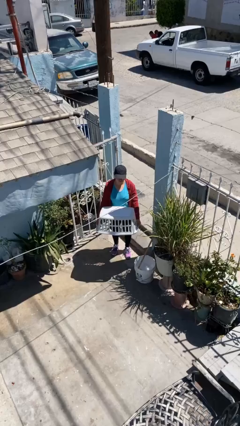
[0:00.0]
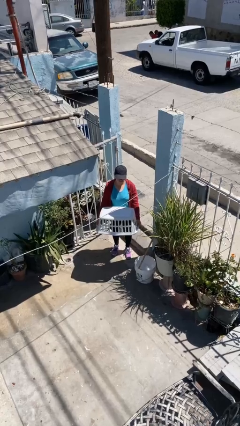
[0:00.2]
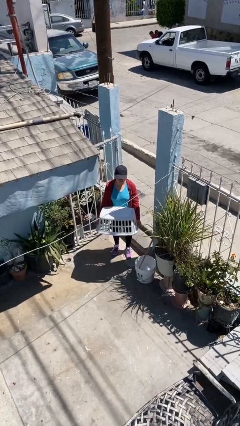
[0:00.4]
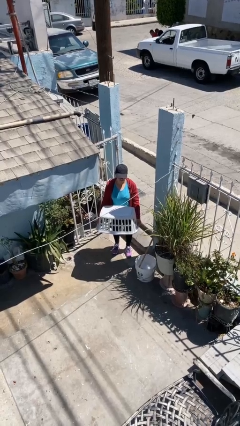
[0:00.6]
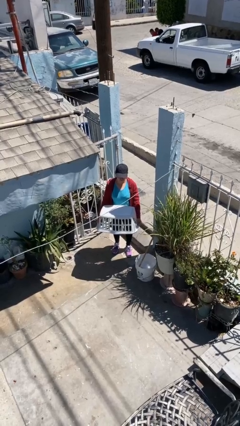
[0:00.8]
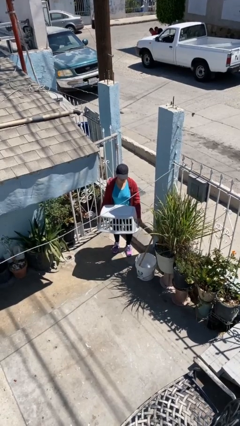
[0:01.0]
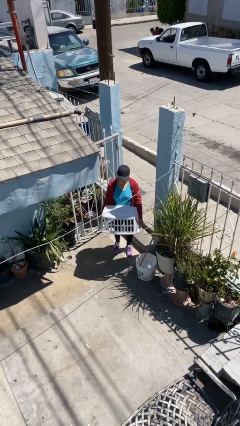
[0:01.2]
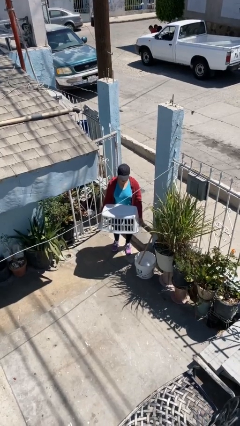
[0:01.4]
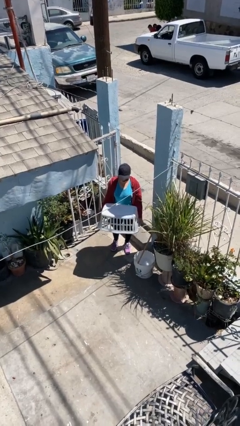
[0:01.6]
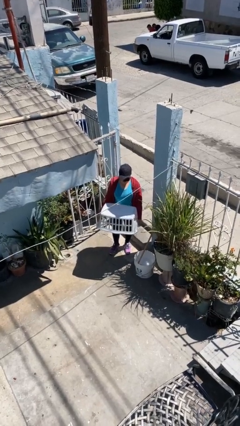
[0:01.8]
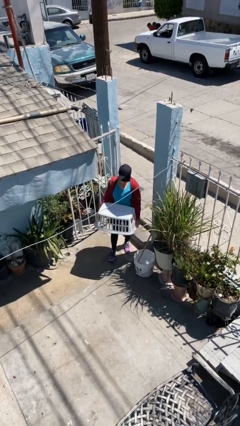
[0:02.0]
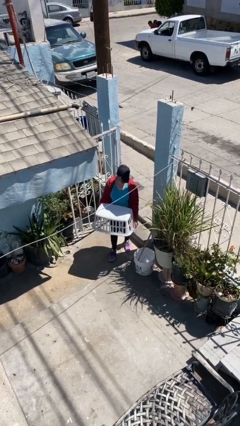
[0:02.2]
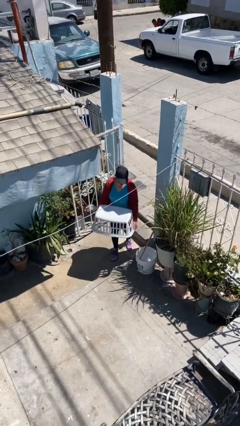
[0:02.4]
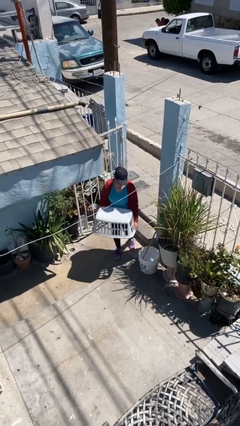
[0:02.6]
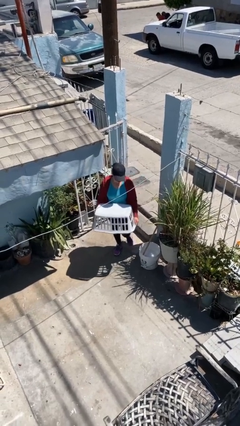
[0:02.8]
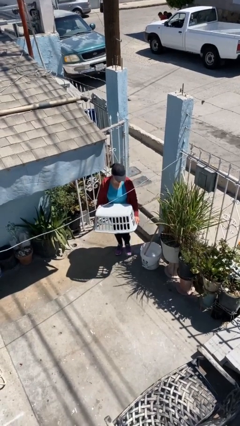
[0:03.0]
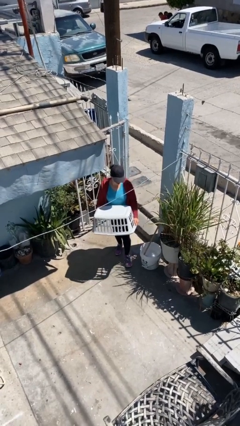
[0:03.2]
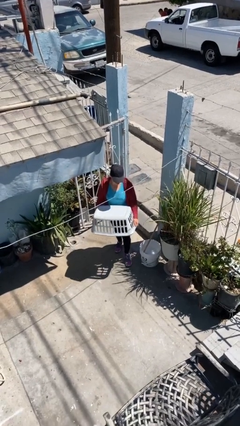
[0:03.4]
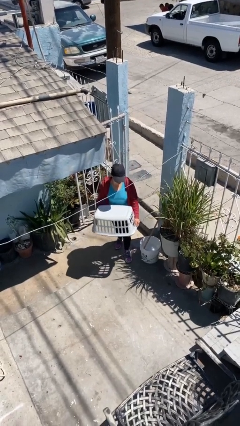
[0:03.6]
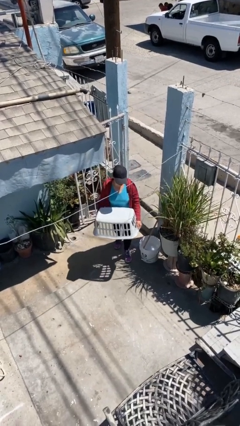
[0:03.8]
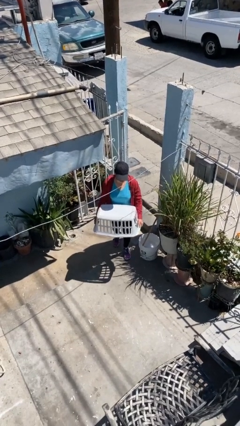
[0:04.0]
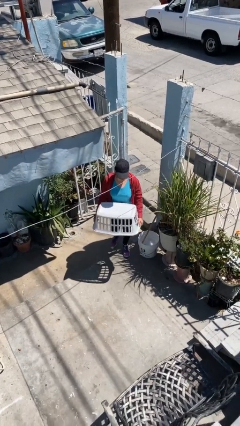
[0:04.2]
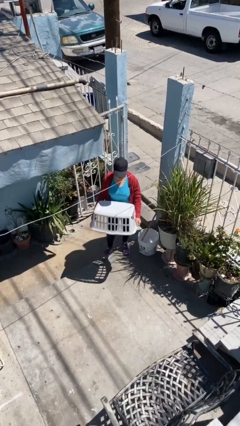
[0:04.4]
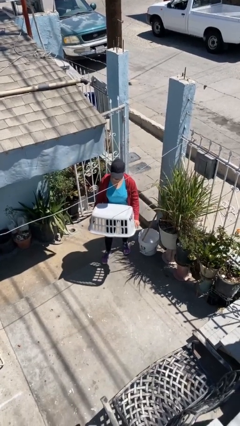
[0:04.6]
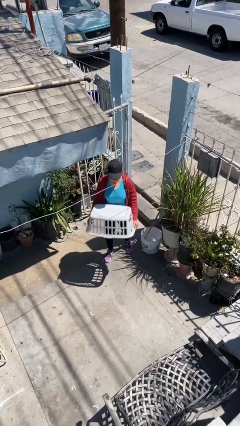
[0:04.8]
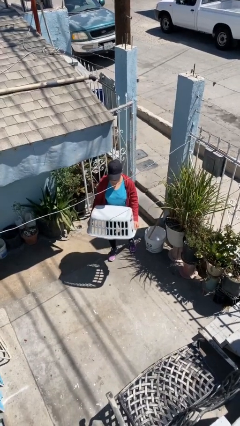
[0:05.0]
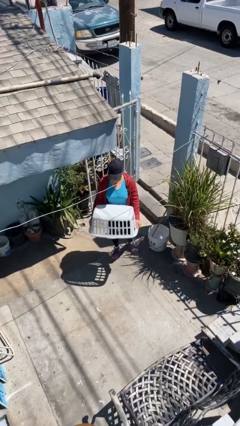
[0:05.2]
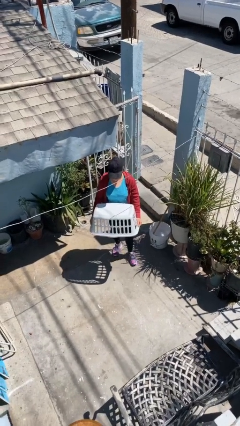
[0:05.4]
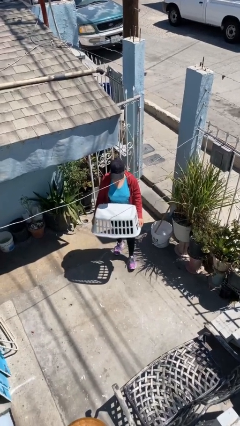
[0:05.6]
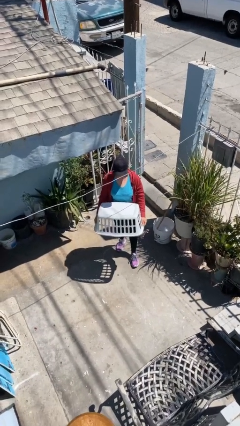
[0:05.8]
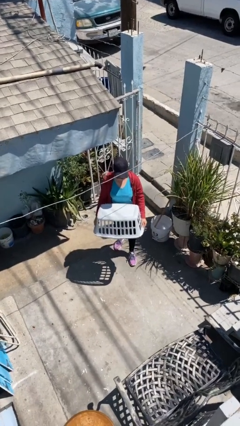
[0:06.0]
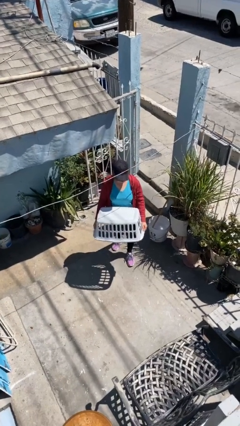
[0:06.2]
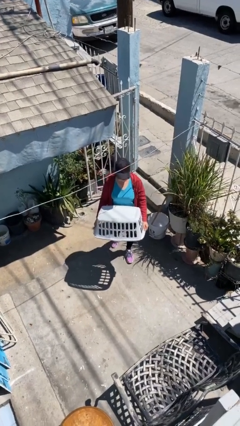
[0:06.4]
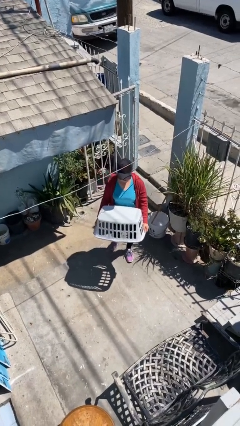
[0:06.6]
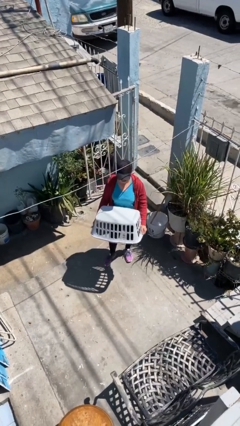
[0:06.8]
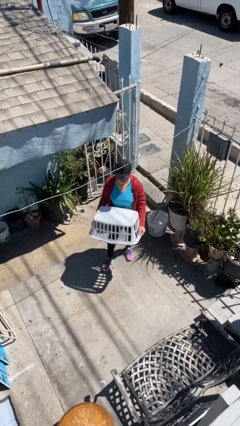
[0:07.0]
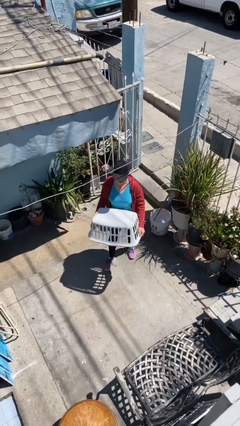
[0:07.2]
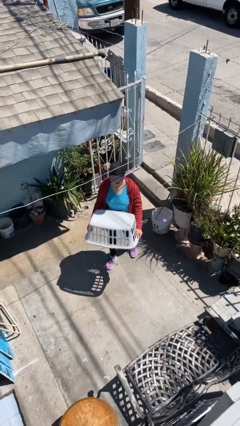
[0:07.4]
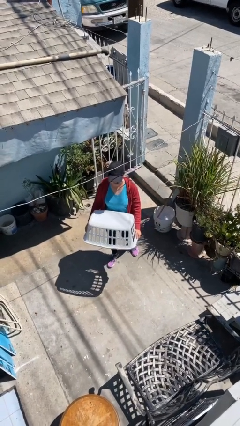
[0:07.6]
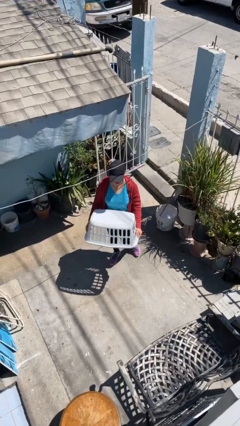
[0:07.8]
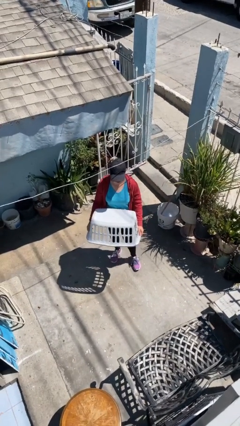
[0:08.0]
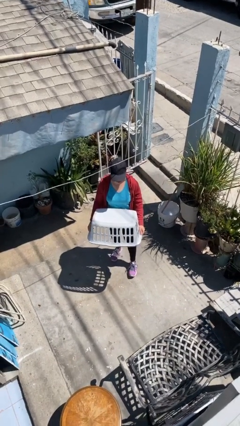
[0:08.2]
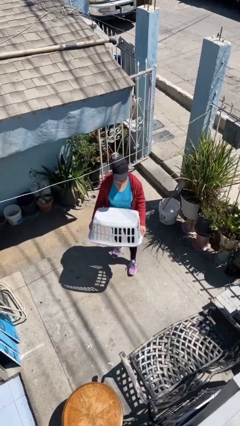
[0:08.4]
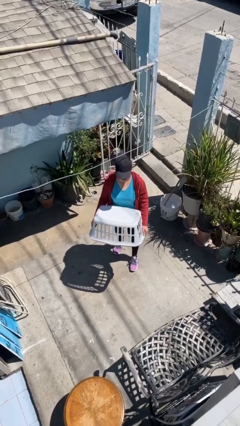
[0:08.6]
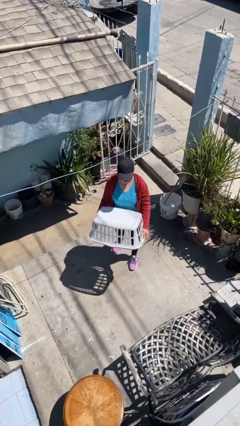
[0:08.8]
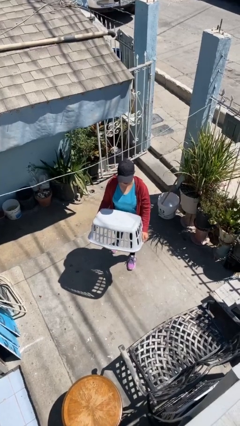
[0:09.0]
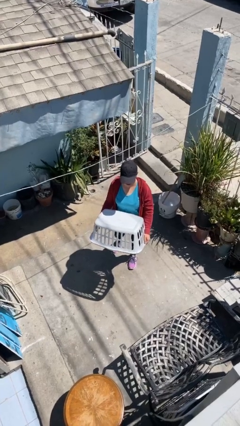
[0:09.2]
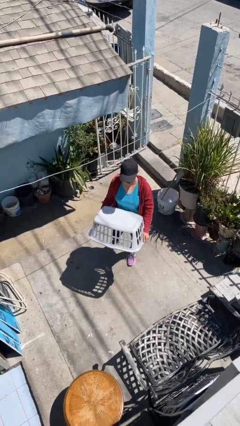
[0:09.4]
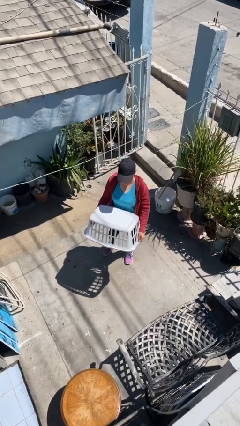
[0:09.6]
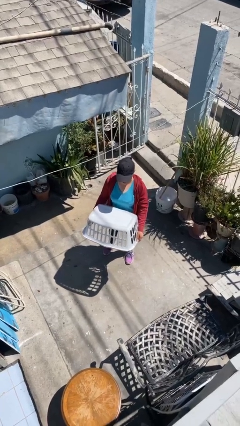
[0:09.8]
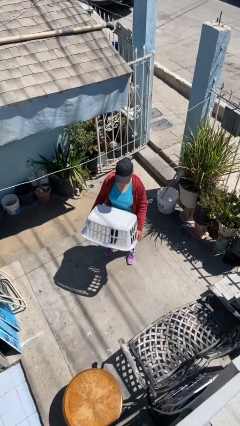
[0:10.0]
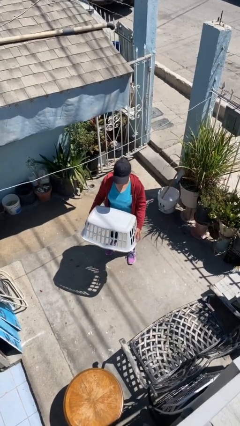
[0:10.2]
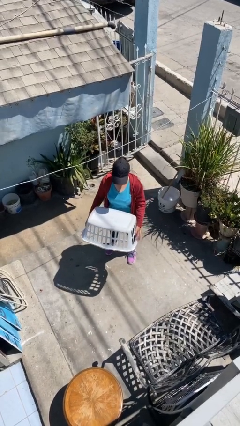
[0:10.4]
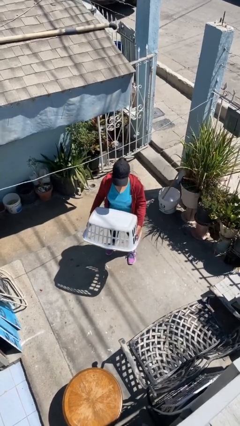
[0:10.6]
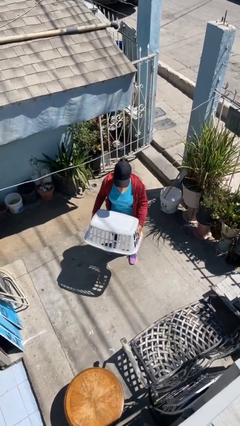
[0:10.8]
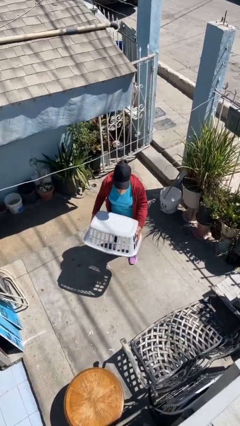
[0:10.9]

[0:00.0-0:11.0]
person carries heavy object

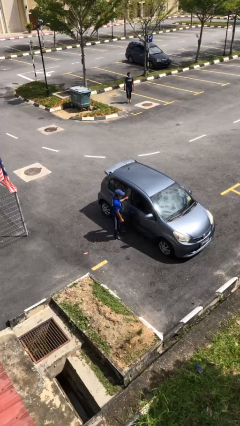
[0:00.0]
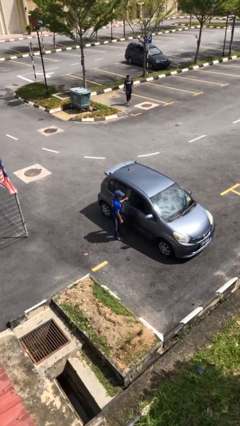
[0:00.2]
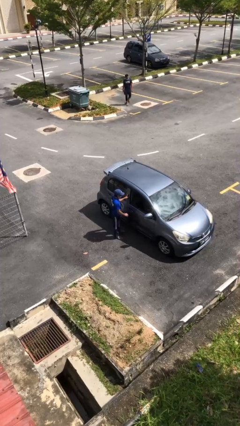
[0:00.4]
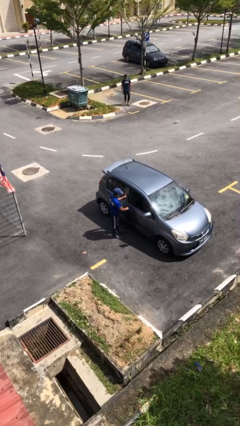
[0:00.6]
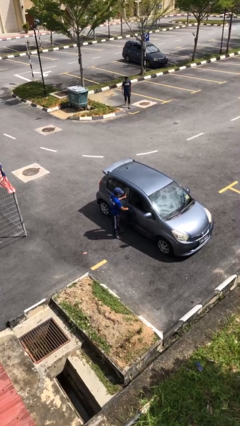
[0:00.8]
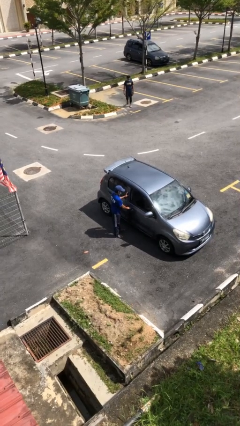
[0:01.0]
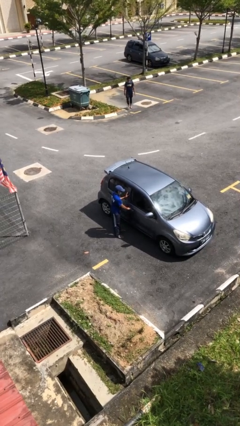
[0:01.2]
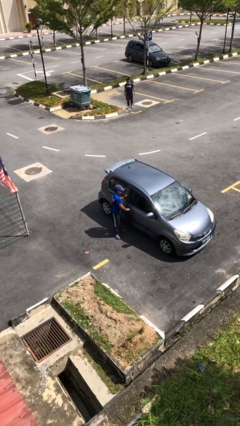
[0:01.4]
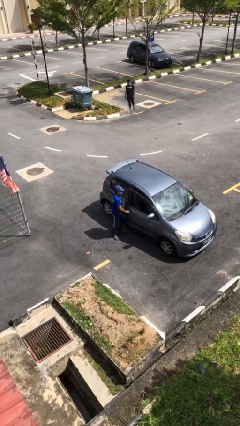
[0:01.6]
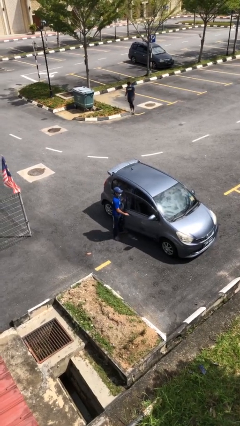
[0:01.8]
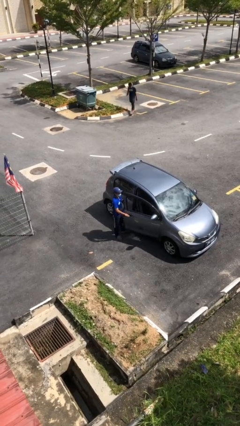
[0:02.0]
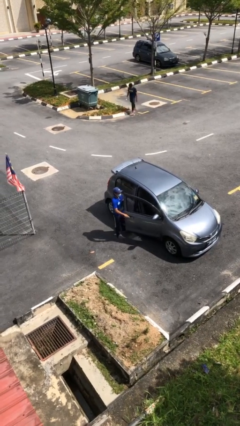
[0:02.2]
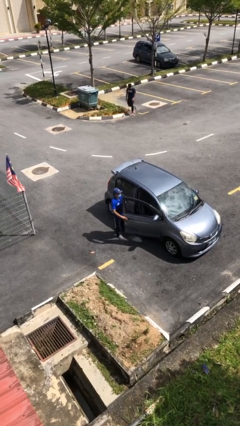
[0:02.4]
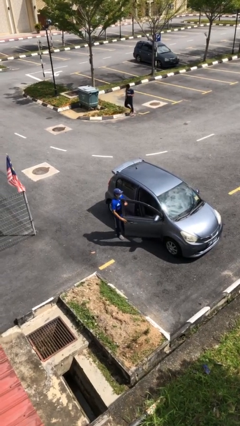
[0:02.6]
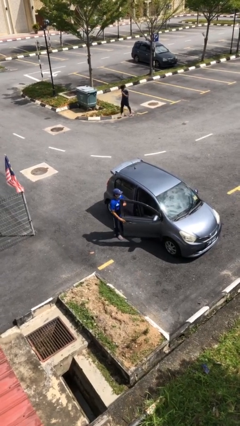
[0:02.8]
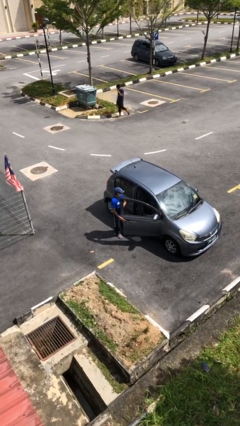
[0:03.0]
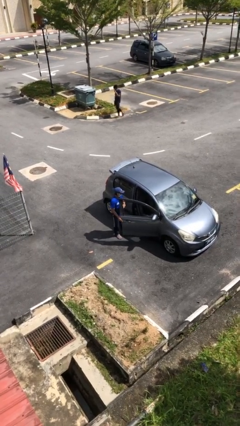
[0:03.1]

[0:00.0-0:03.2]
person opens car door

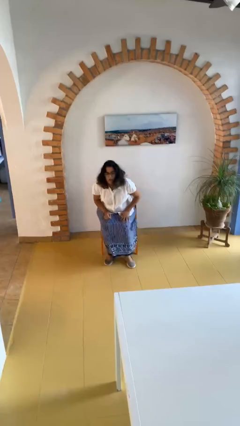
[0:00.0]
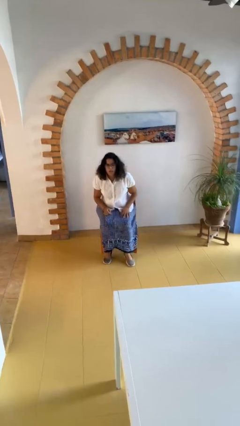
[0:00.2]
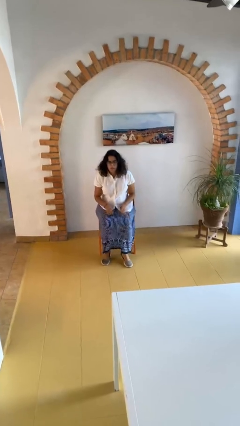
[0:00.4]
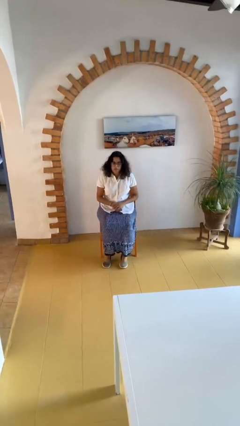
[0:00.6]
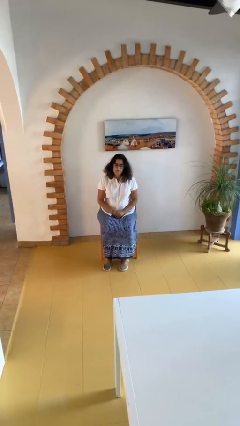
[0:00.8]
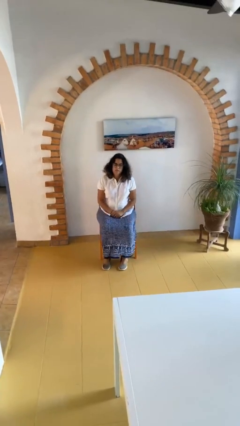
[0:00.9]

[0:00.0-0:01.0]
person sits down

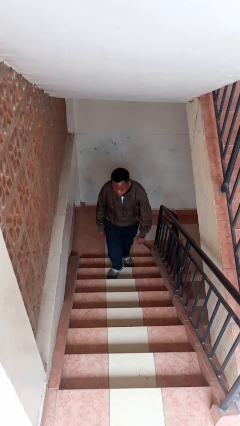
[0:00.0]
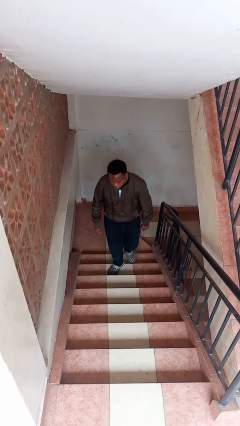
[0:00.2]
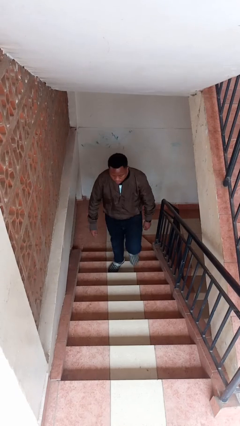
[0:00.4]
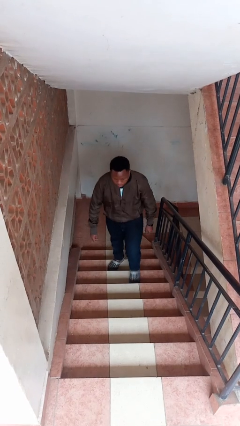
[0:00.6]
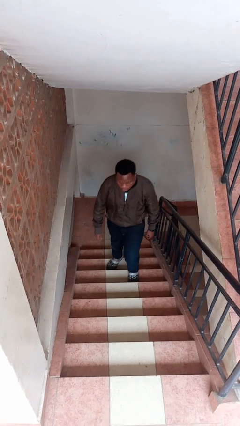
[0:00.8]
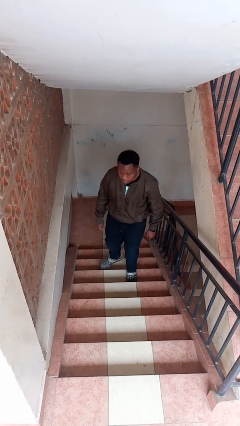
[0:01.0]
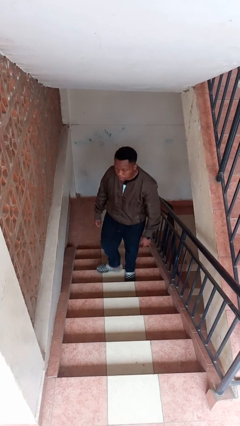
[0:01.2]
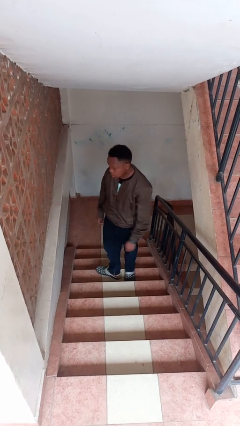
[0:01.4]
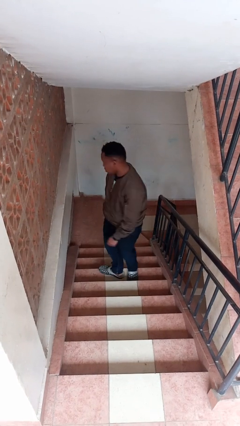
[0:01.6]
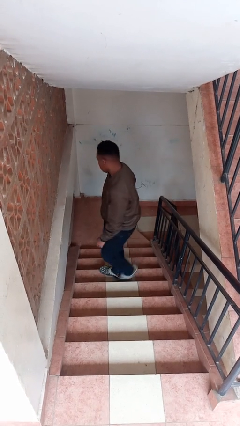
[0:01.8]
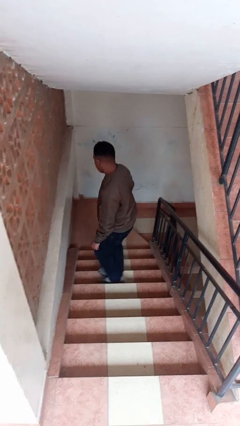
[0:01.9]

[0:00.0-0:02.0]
person climbs up stairs

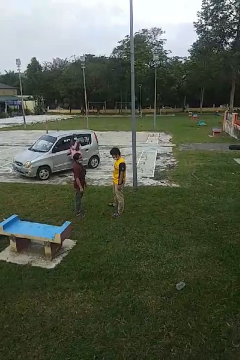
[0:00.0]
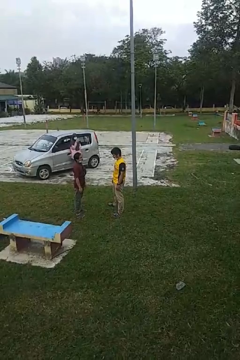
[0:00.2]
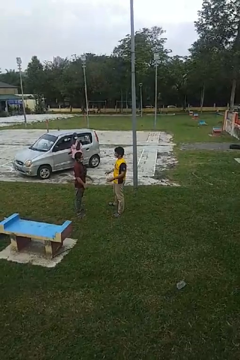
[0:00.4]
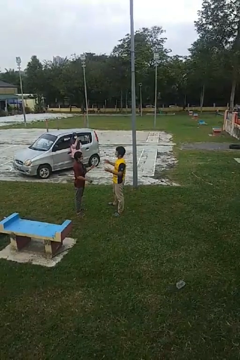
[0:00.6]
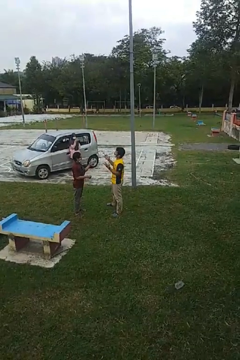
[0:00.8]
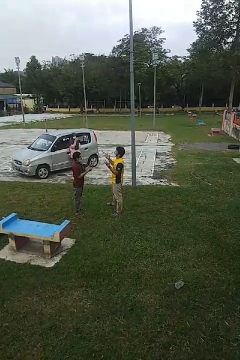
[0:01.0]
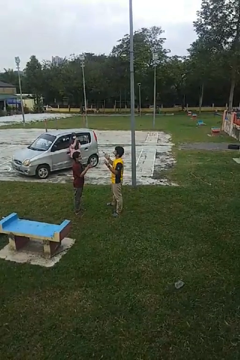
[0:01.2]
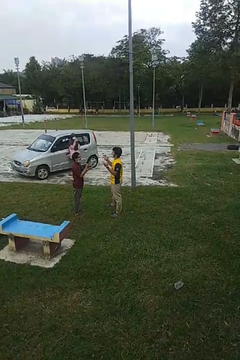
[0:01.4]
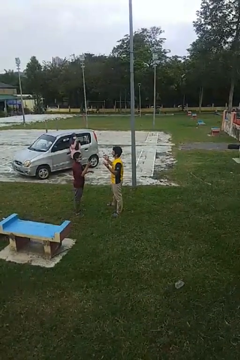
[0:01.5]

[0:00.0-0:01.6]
person talks to person
